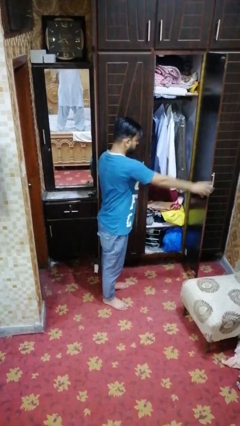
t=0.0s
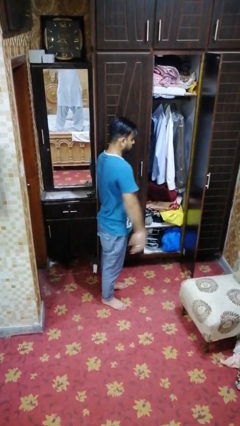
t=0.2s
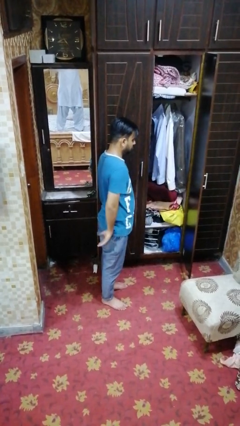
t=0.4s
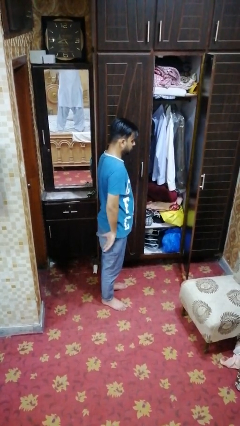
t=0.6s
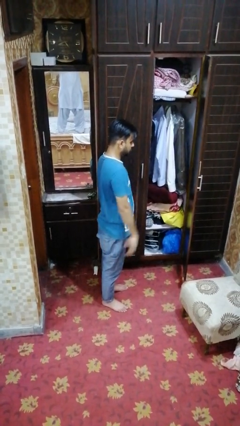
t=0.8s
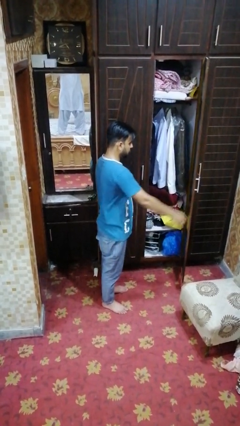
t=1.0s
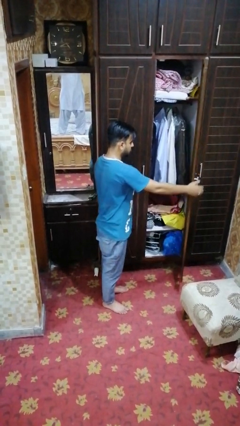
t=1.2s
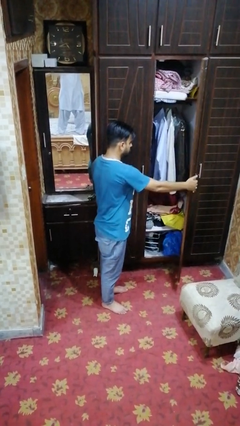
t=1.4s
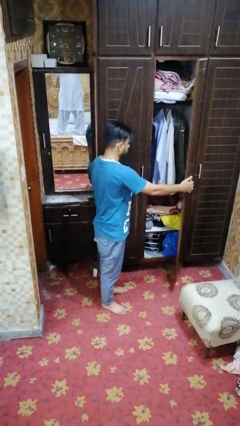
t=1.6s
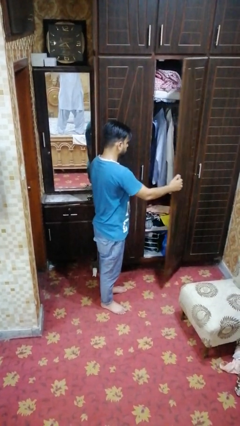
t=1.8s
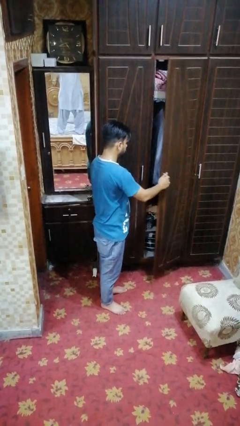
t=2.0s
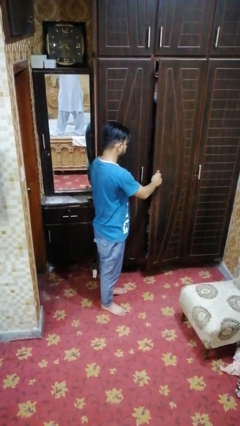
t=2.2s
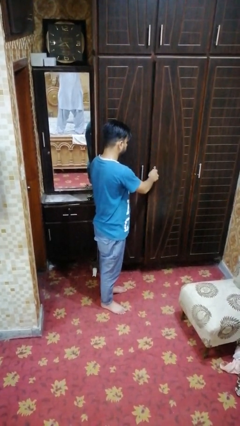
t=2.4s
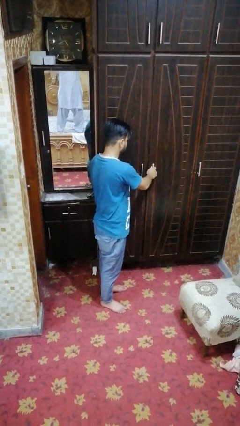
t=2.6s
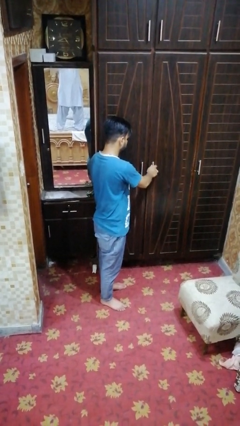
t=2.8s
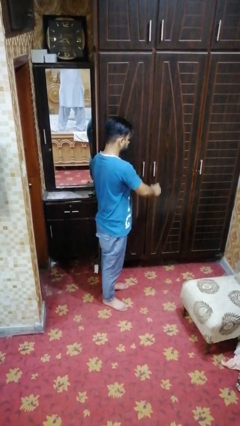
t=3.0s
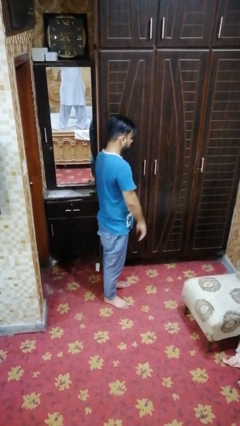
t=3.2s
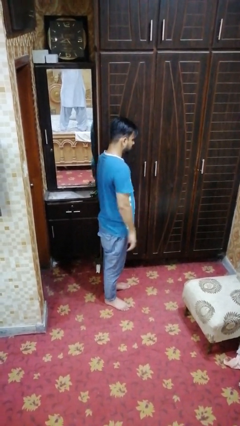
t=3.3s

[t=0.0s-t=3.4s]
person closes closet door

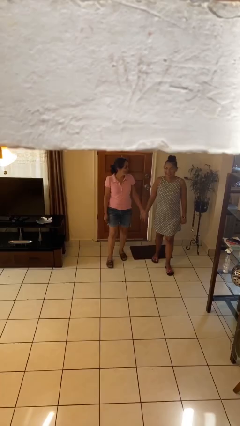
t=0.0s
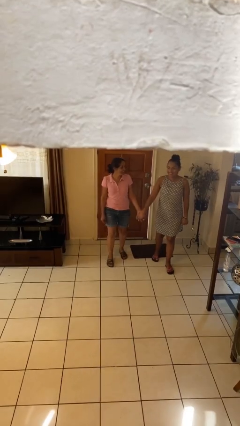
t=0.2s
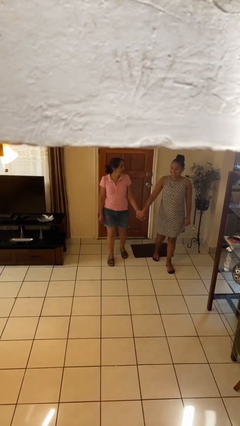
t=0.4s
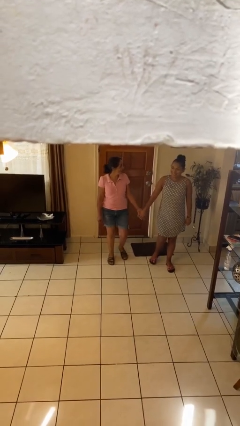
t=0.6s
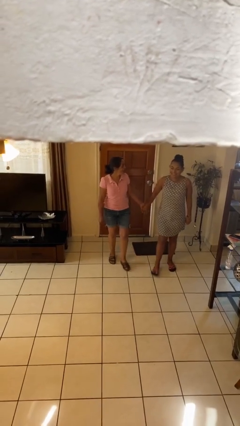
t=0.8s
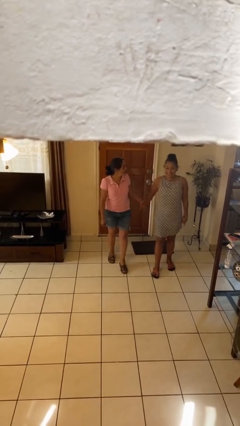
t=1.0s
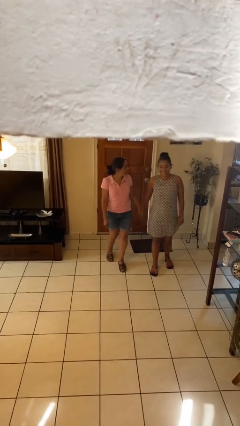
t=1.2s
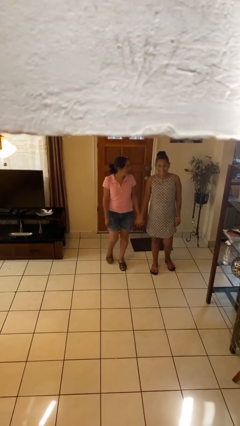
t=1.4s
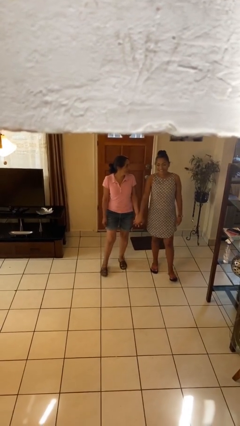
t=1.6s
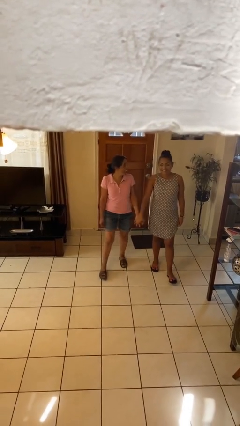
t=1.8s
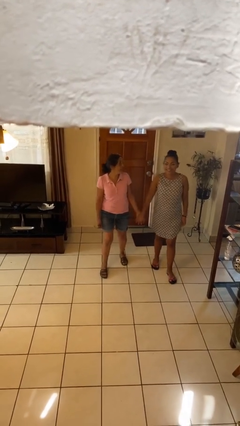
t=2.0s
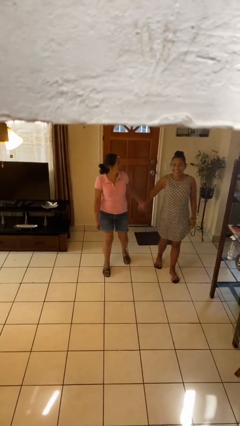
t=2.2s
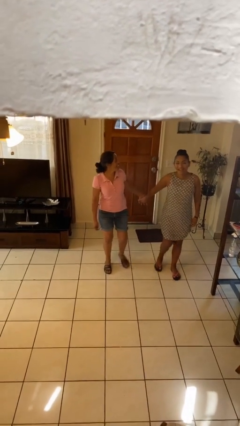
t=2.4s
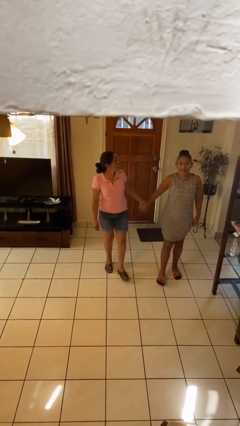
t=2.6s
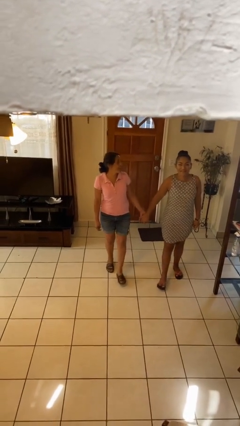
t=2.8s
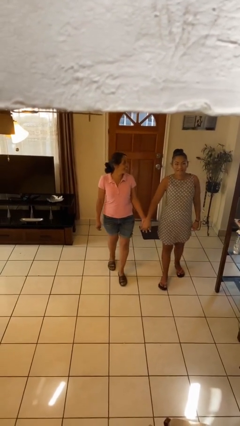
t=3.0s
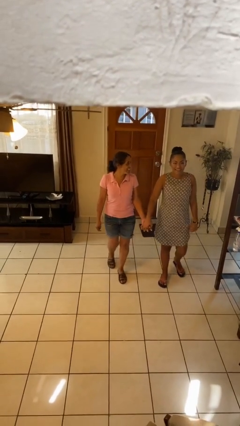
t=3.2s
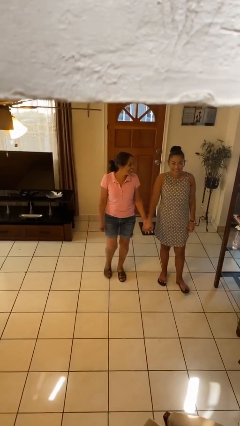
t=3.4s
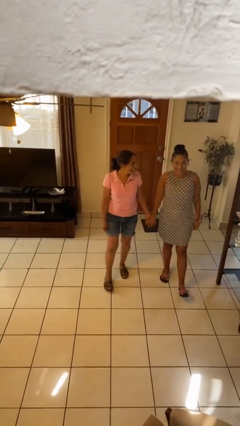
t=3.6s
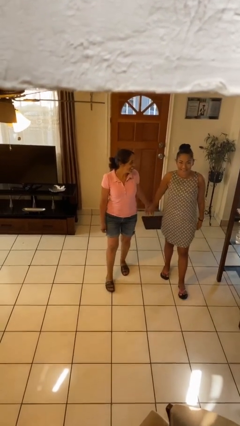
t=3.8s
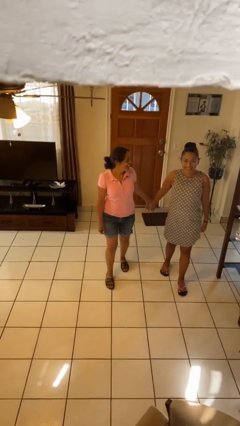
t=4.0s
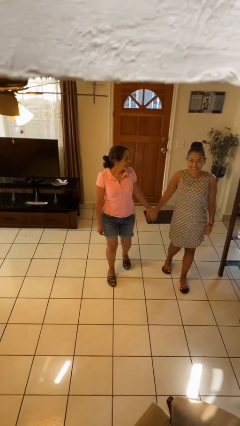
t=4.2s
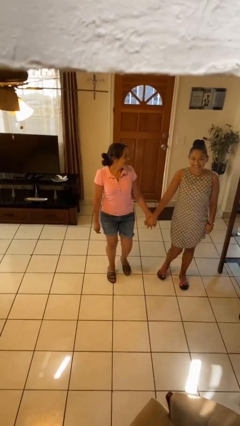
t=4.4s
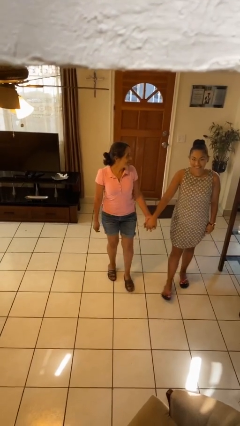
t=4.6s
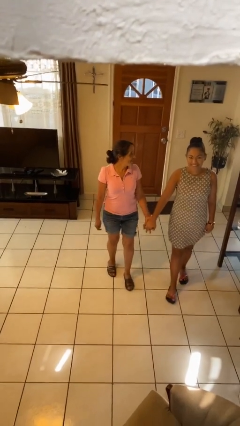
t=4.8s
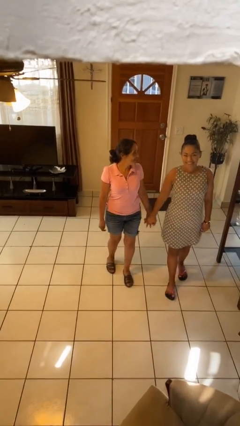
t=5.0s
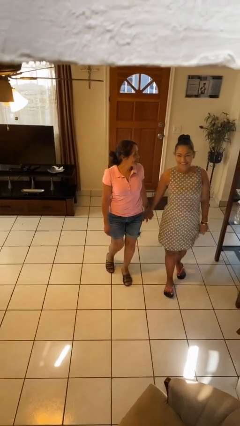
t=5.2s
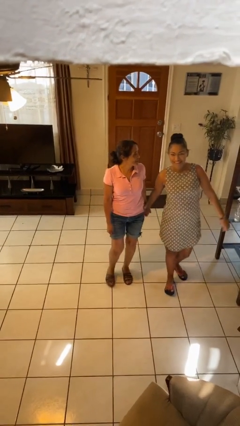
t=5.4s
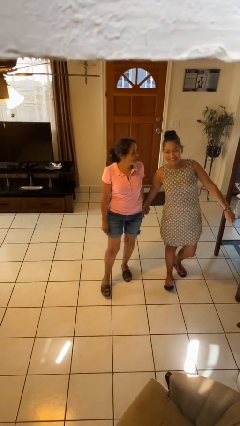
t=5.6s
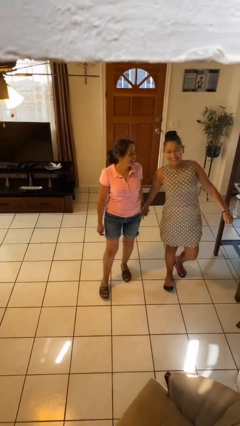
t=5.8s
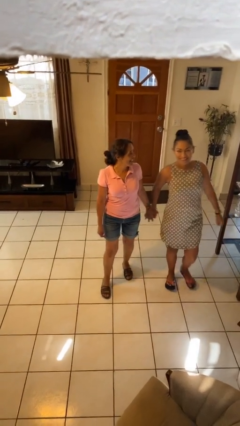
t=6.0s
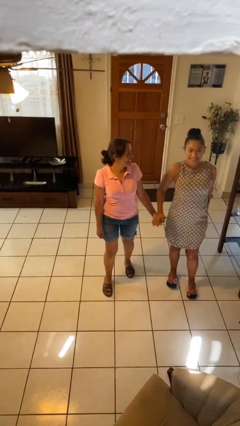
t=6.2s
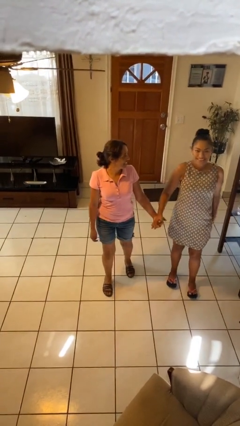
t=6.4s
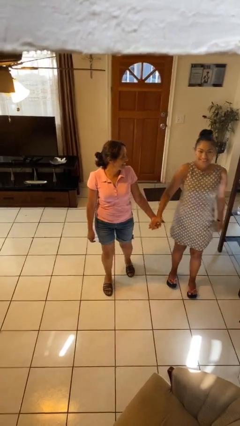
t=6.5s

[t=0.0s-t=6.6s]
person holds hand

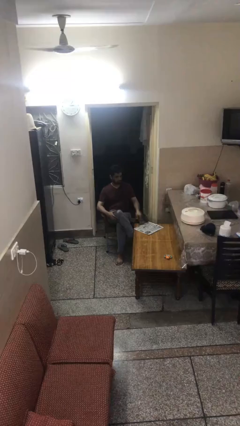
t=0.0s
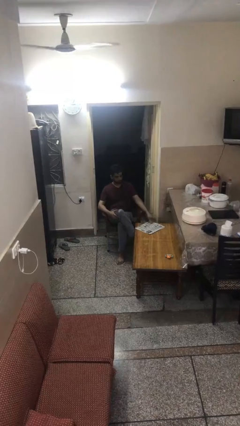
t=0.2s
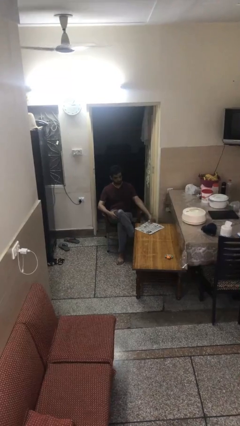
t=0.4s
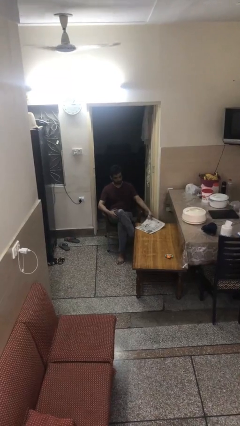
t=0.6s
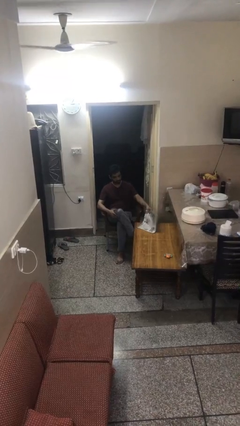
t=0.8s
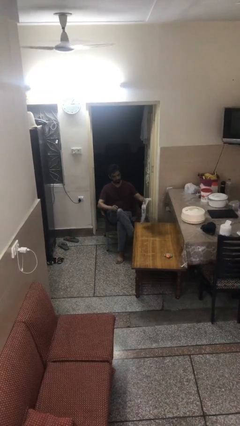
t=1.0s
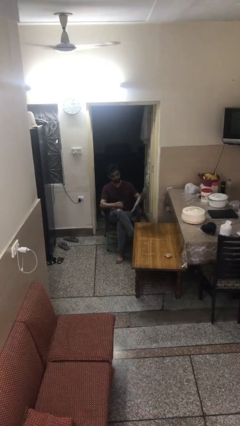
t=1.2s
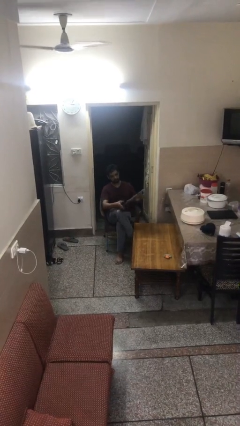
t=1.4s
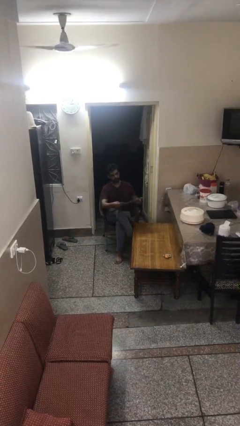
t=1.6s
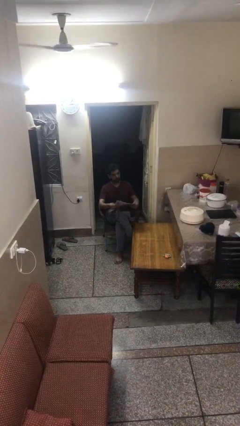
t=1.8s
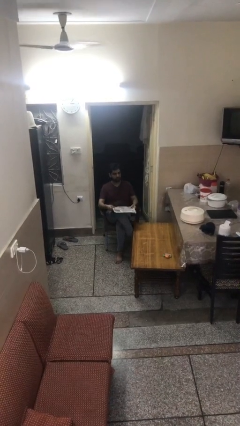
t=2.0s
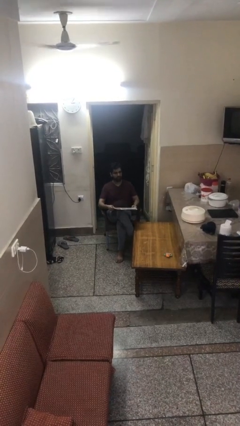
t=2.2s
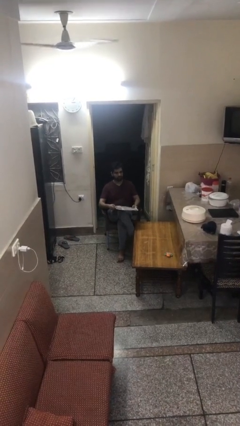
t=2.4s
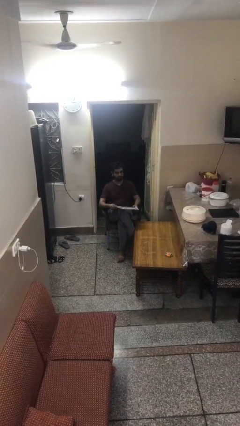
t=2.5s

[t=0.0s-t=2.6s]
person picks up object from table

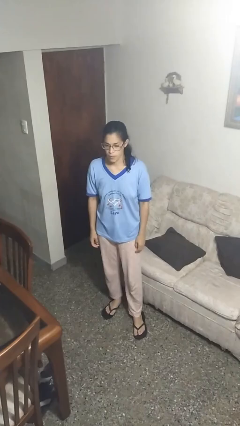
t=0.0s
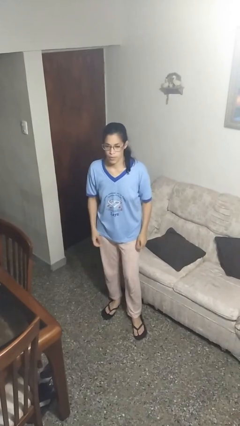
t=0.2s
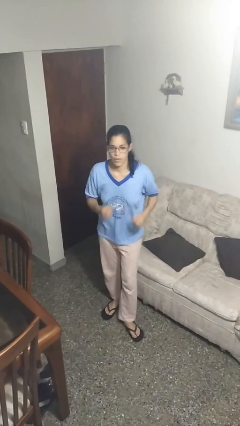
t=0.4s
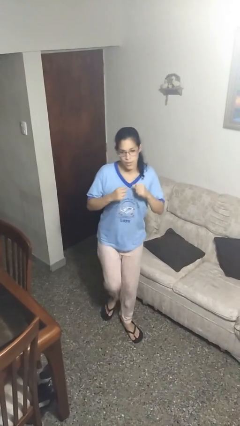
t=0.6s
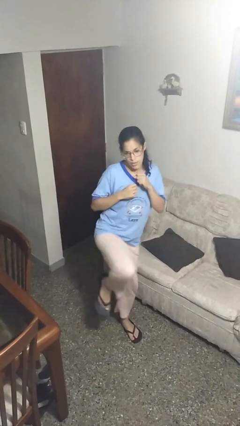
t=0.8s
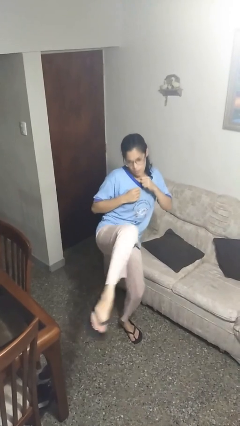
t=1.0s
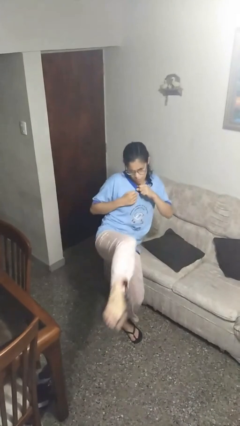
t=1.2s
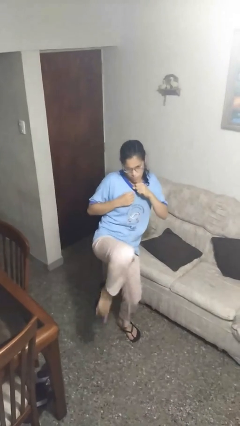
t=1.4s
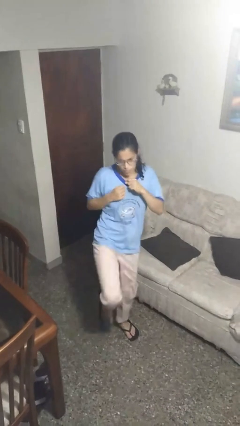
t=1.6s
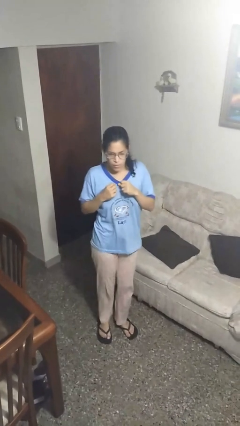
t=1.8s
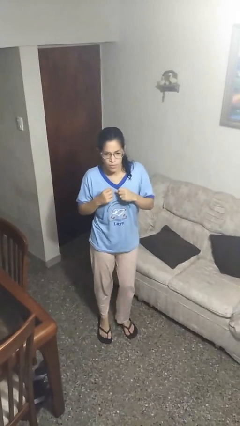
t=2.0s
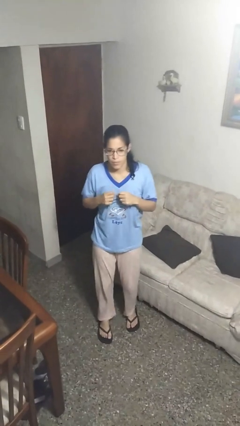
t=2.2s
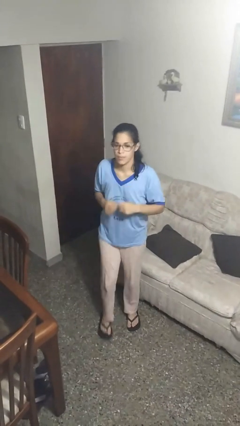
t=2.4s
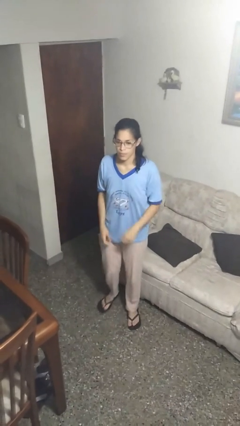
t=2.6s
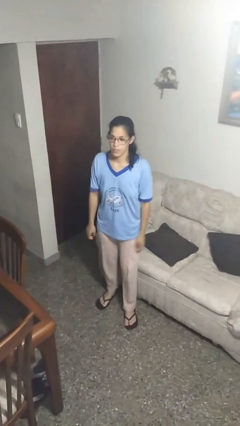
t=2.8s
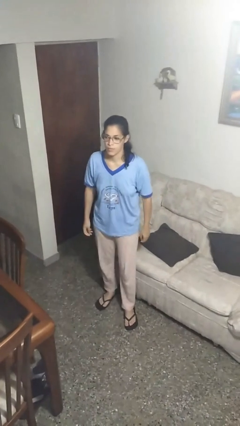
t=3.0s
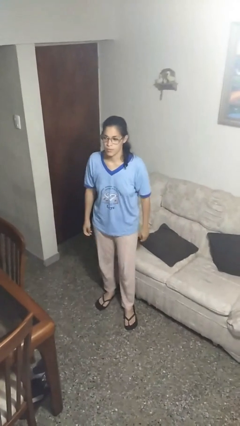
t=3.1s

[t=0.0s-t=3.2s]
person karate kicks

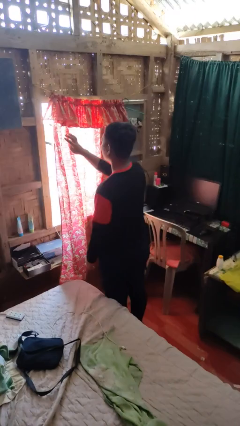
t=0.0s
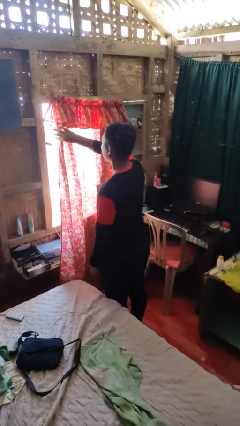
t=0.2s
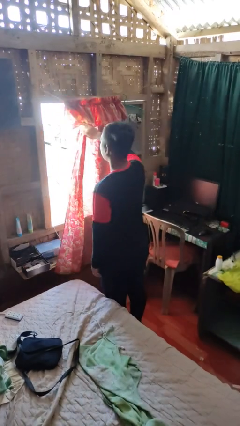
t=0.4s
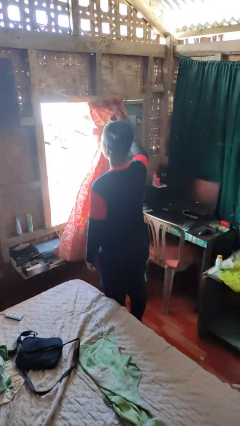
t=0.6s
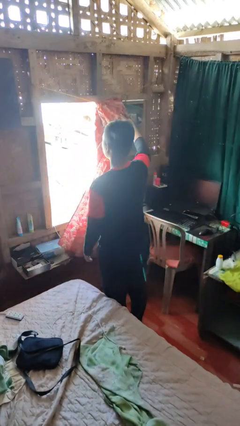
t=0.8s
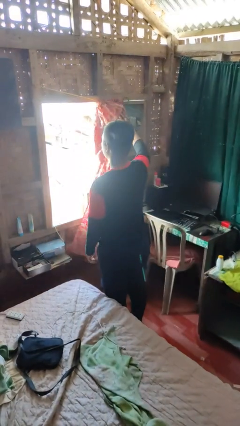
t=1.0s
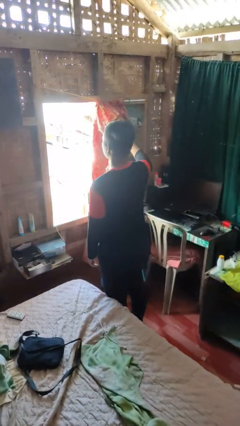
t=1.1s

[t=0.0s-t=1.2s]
person opens curtains

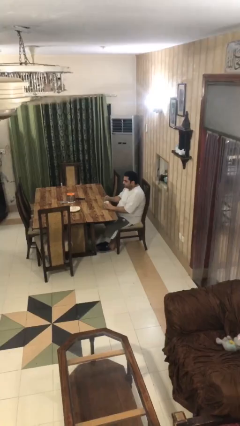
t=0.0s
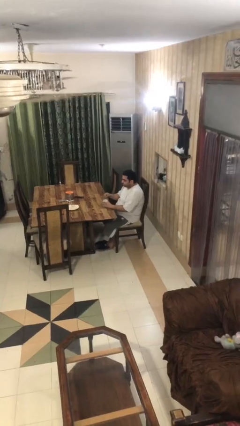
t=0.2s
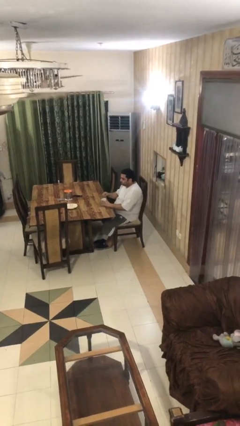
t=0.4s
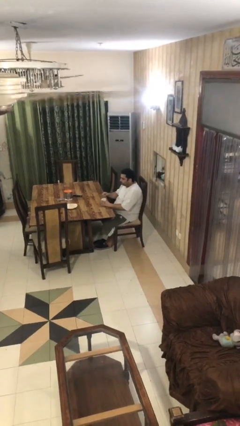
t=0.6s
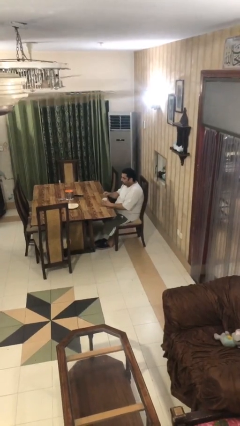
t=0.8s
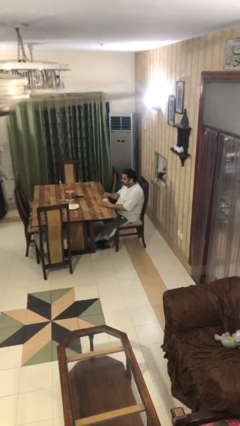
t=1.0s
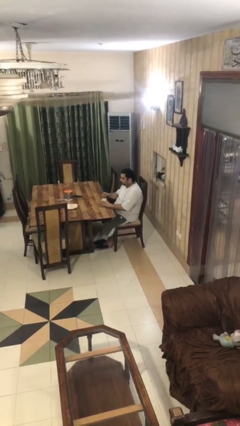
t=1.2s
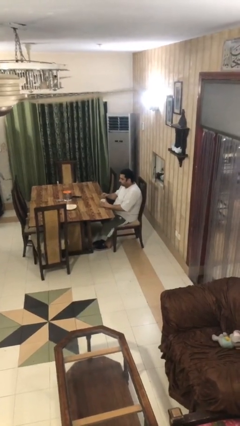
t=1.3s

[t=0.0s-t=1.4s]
person stirs mug
